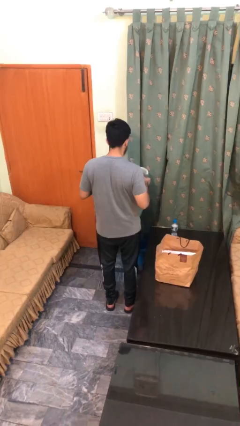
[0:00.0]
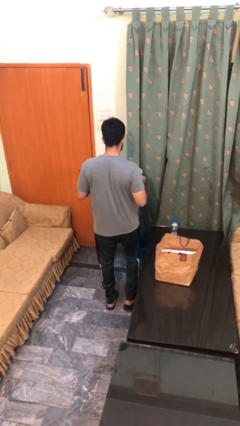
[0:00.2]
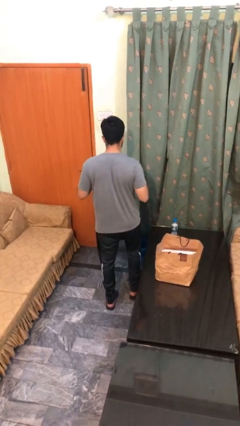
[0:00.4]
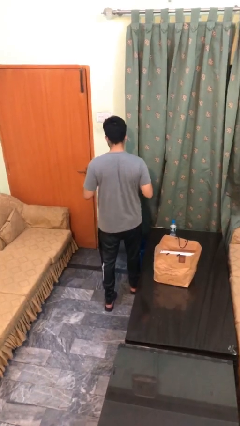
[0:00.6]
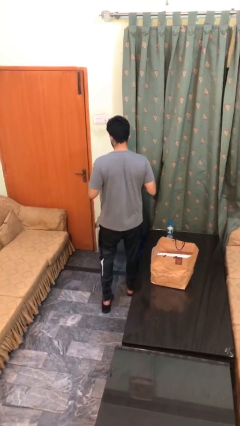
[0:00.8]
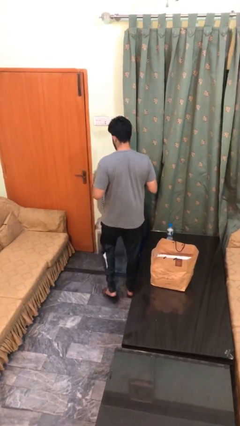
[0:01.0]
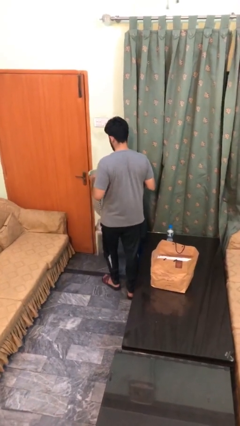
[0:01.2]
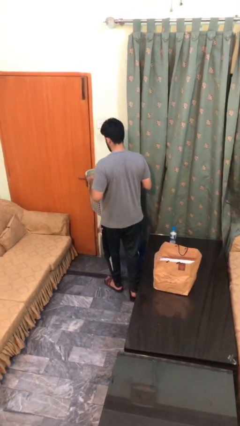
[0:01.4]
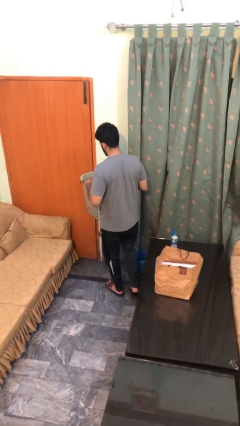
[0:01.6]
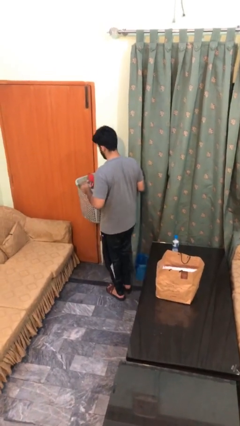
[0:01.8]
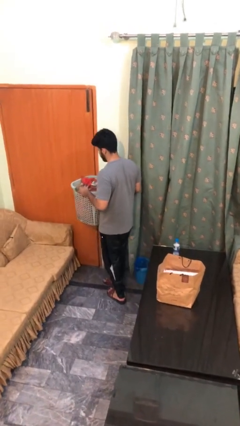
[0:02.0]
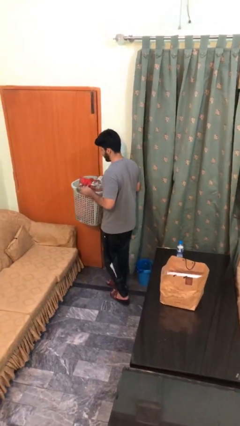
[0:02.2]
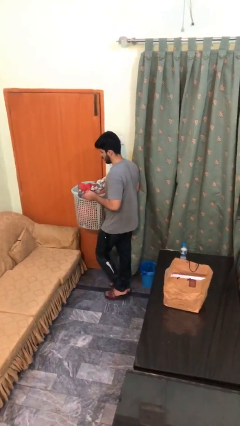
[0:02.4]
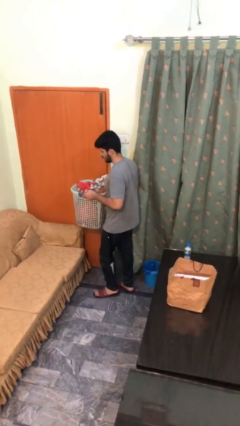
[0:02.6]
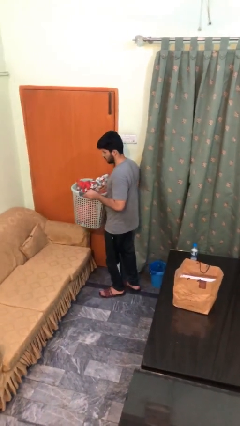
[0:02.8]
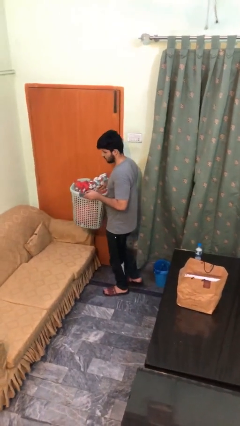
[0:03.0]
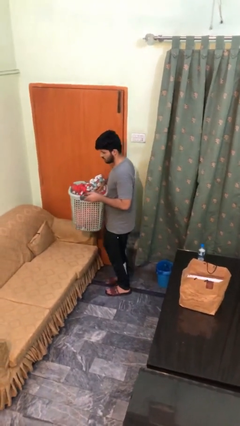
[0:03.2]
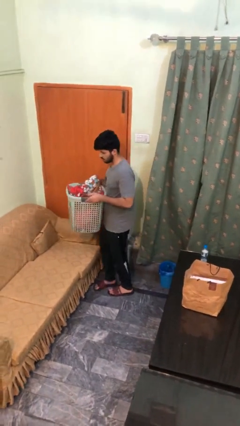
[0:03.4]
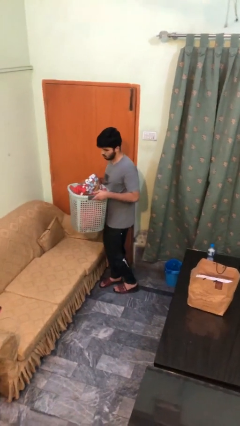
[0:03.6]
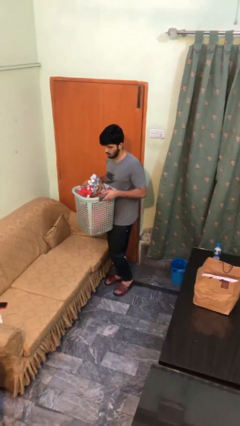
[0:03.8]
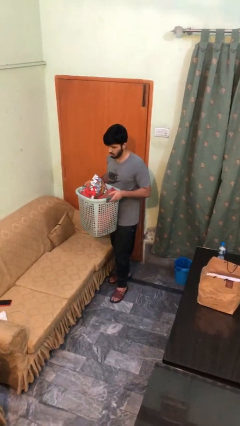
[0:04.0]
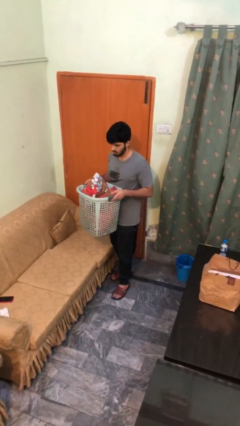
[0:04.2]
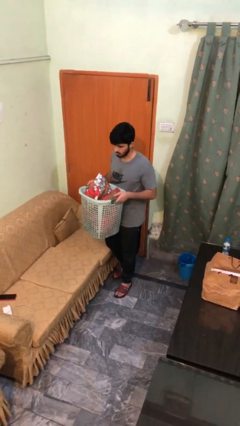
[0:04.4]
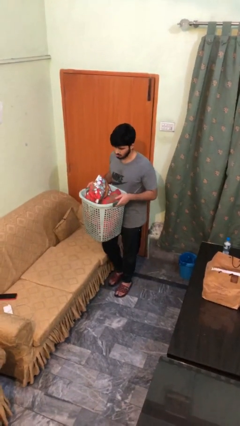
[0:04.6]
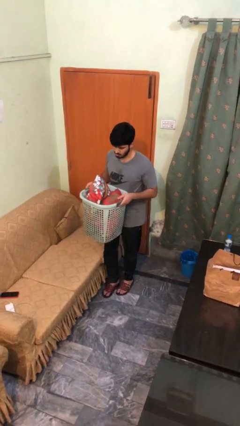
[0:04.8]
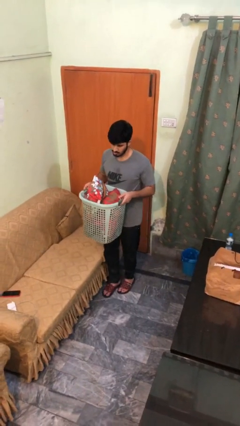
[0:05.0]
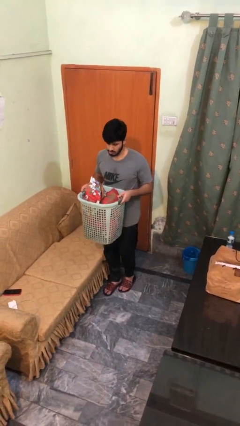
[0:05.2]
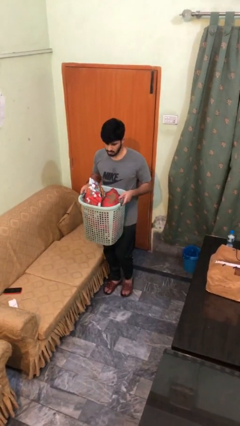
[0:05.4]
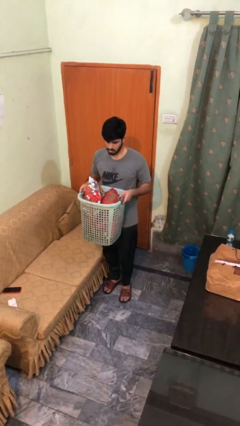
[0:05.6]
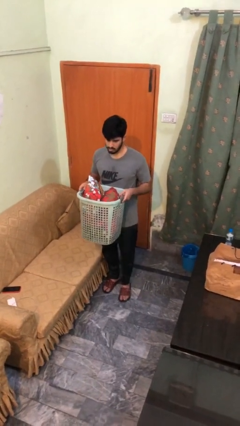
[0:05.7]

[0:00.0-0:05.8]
person carries laundry basket

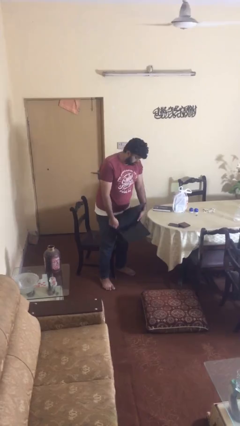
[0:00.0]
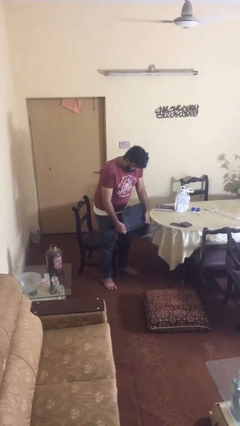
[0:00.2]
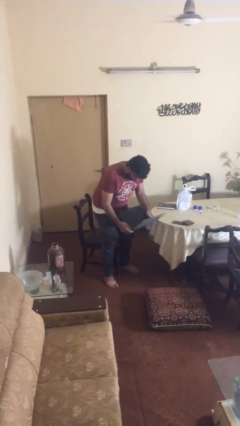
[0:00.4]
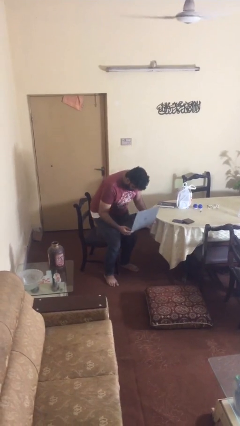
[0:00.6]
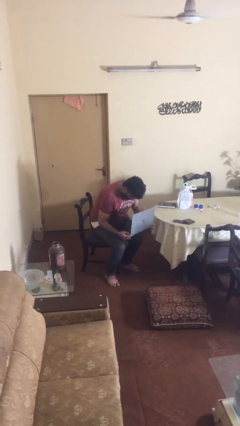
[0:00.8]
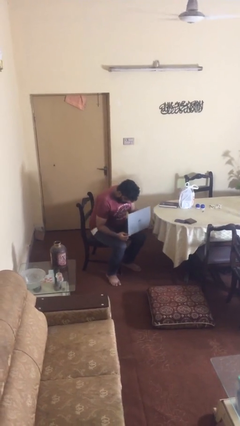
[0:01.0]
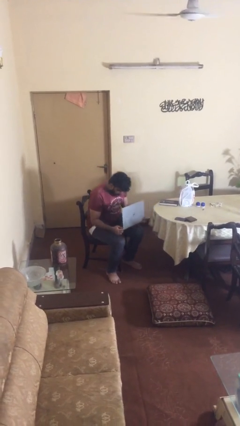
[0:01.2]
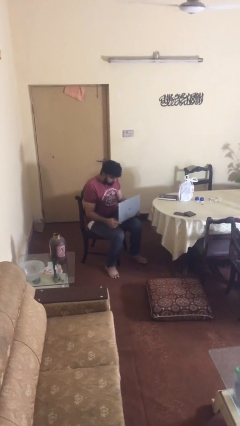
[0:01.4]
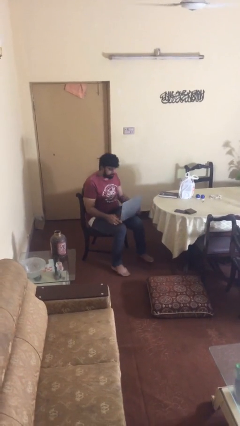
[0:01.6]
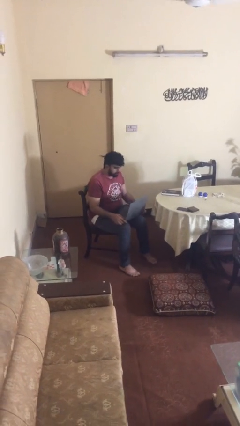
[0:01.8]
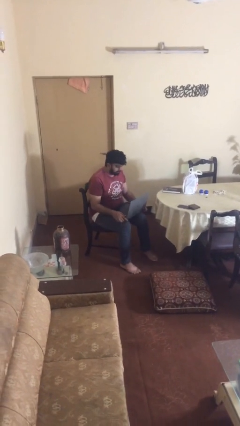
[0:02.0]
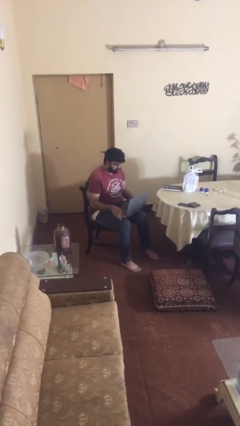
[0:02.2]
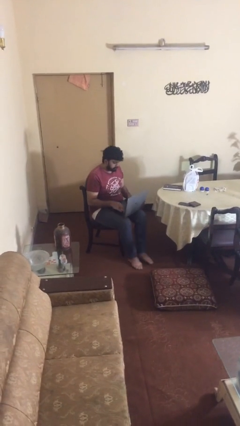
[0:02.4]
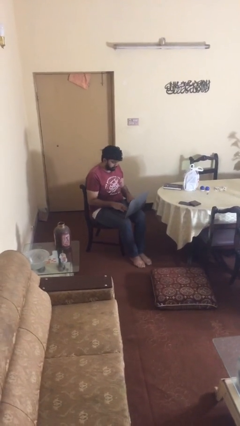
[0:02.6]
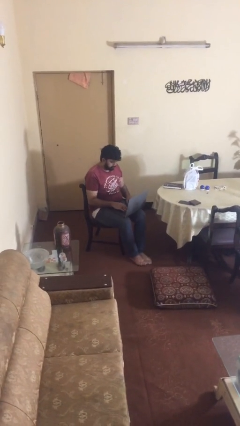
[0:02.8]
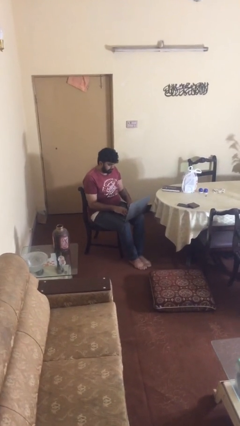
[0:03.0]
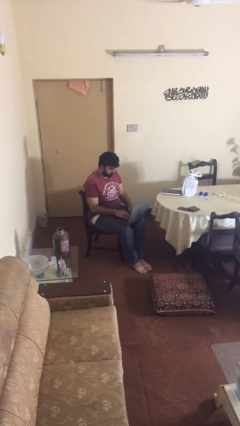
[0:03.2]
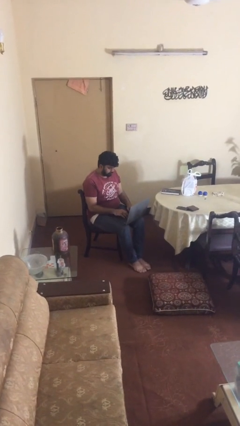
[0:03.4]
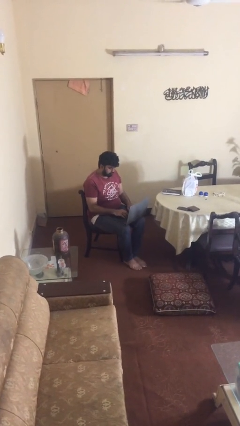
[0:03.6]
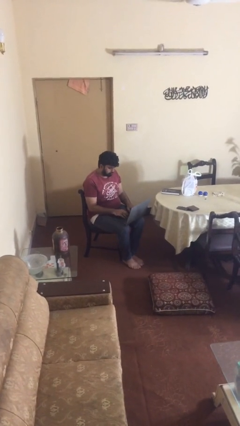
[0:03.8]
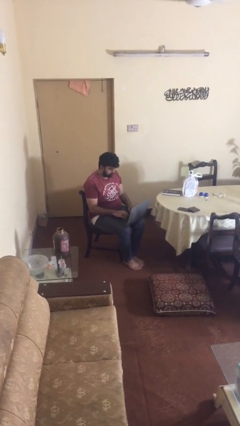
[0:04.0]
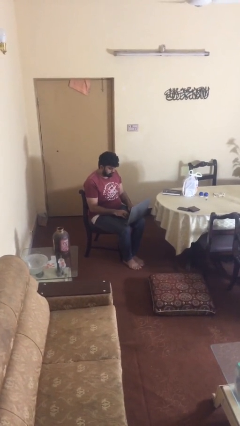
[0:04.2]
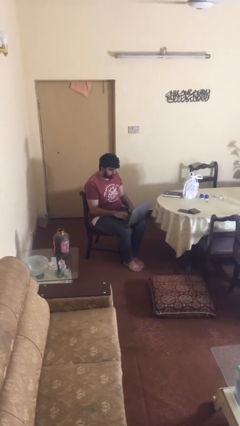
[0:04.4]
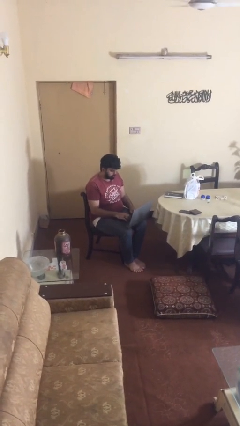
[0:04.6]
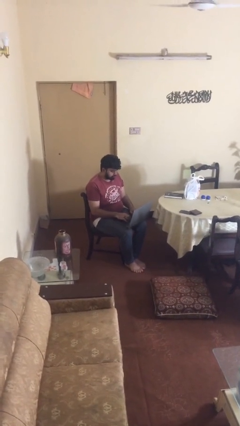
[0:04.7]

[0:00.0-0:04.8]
person sits down

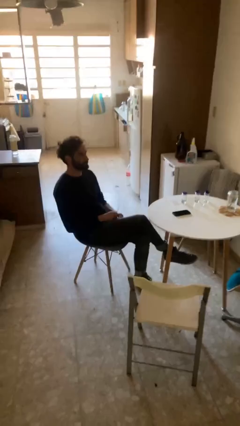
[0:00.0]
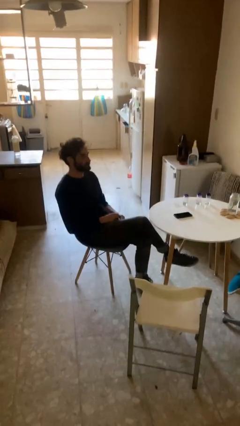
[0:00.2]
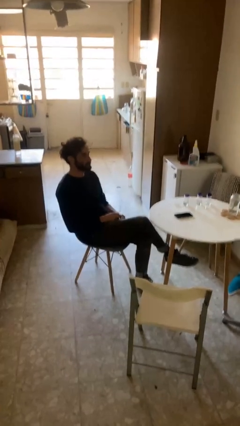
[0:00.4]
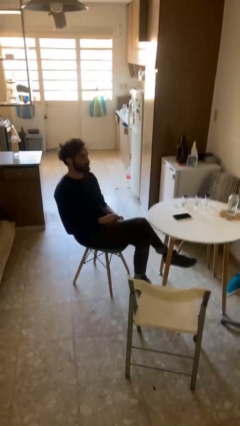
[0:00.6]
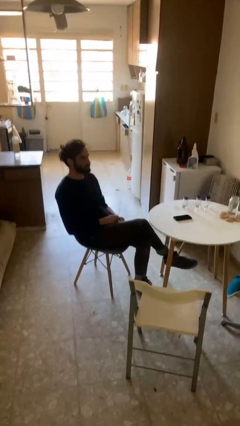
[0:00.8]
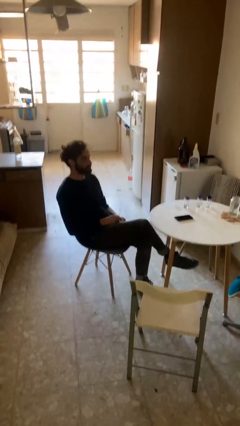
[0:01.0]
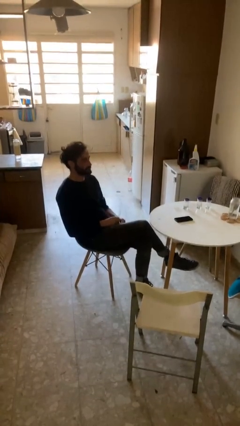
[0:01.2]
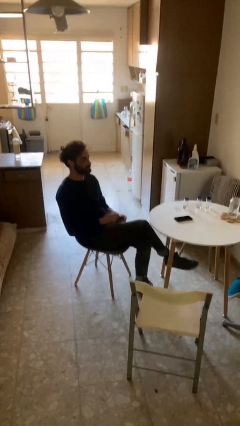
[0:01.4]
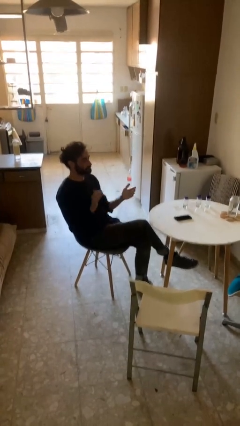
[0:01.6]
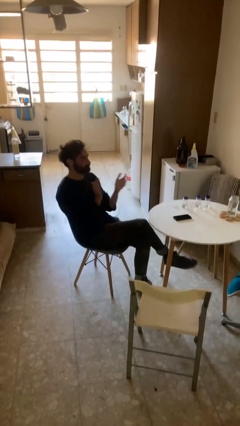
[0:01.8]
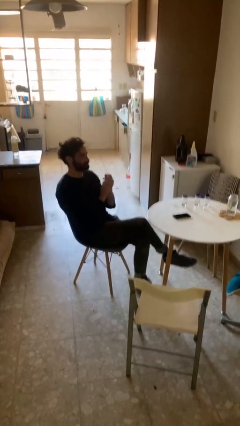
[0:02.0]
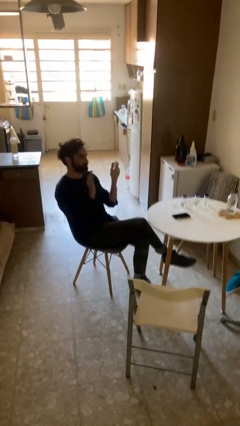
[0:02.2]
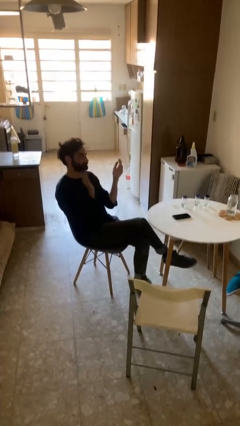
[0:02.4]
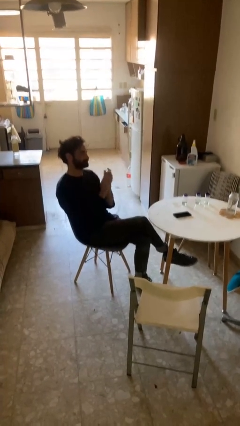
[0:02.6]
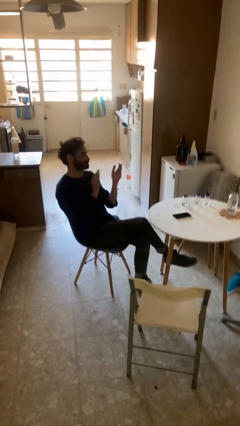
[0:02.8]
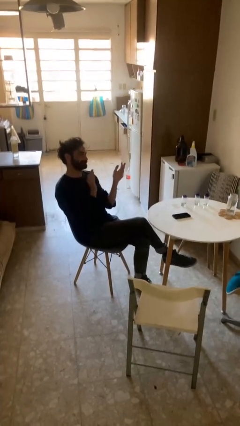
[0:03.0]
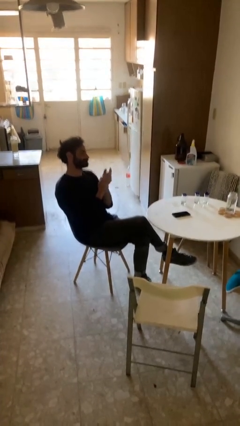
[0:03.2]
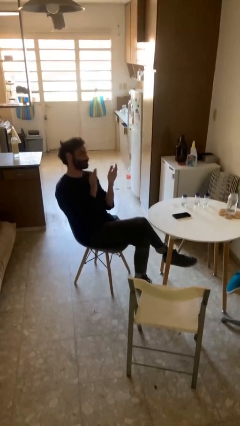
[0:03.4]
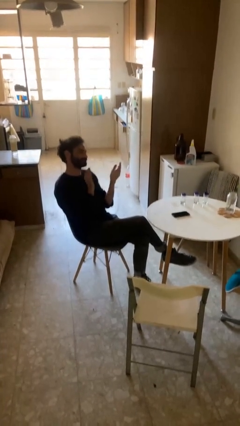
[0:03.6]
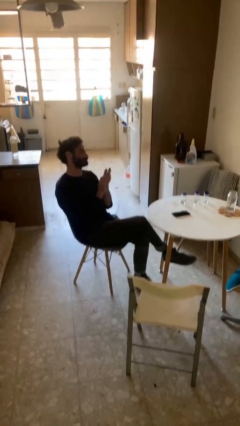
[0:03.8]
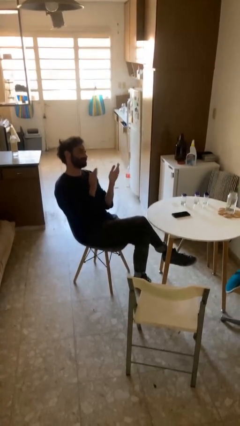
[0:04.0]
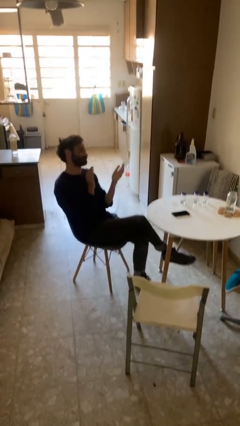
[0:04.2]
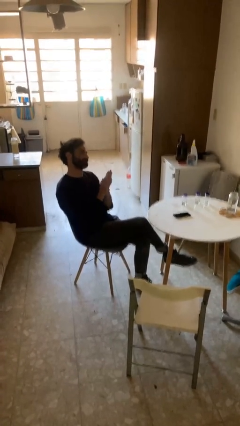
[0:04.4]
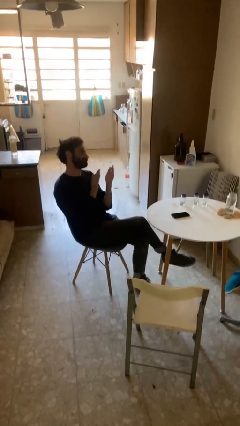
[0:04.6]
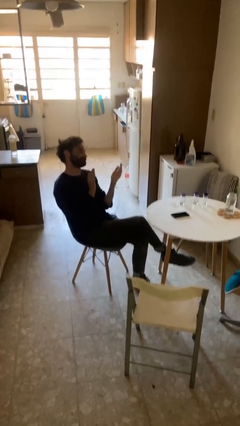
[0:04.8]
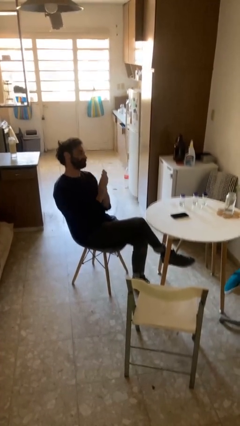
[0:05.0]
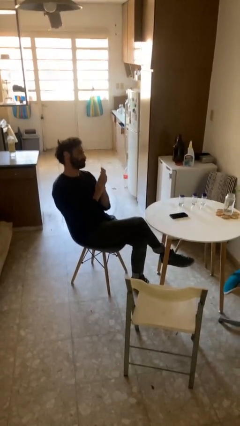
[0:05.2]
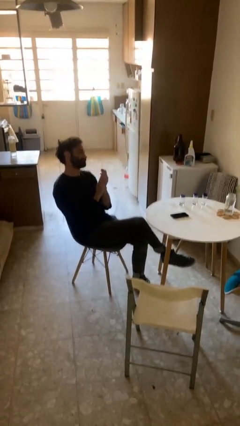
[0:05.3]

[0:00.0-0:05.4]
person claps hands

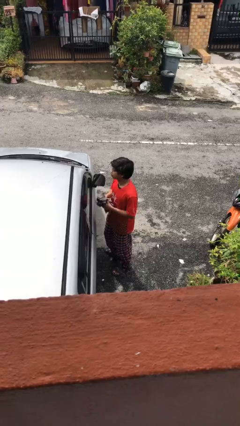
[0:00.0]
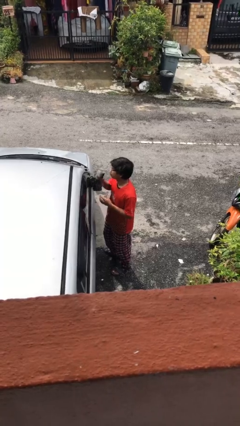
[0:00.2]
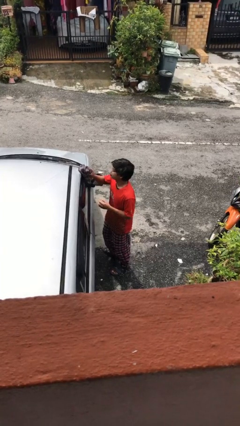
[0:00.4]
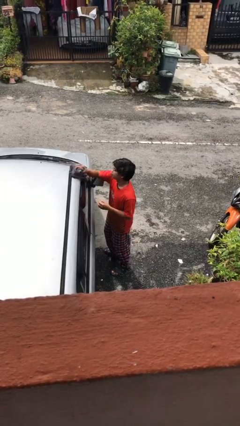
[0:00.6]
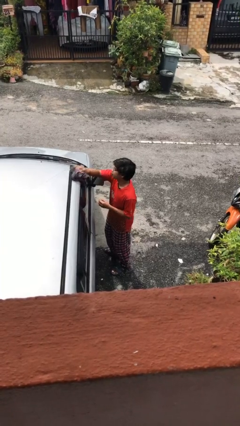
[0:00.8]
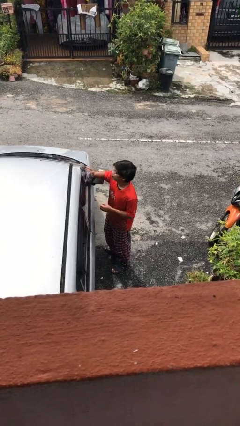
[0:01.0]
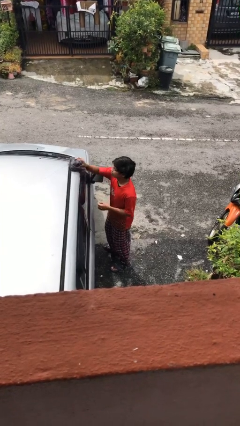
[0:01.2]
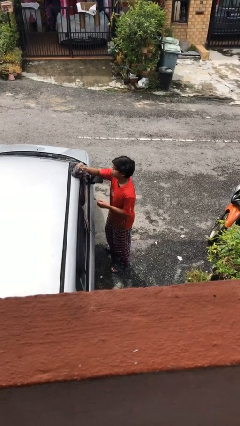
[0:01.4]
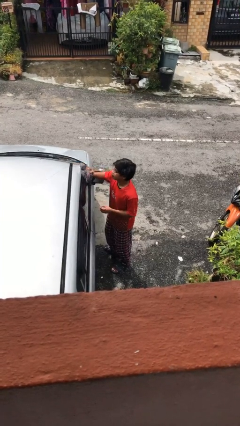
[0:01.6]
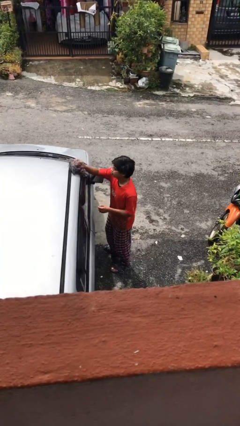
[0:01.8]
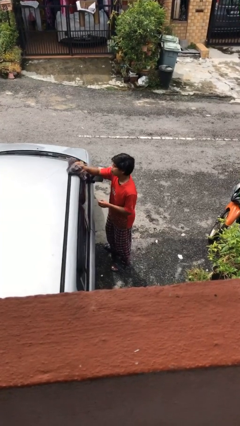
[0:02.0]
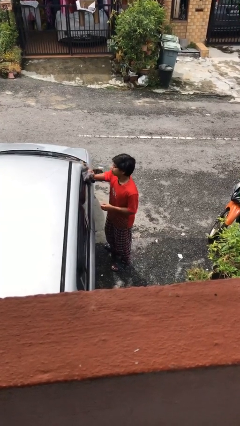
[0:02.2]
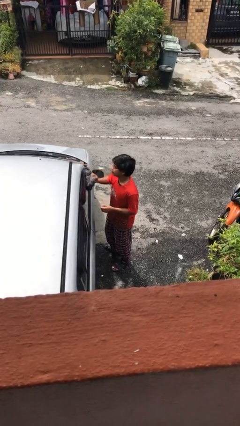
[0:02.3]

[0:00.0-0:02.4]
person polishes car with rag
